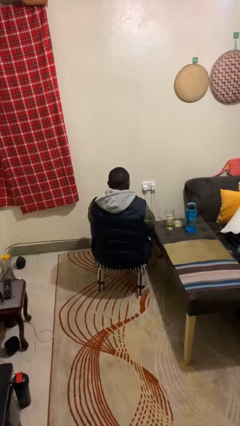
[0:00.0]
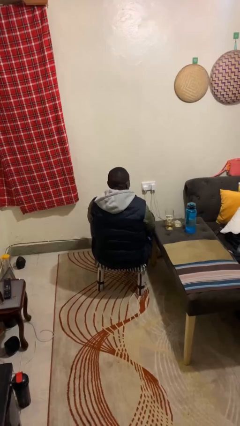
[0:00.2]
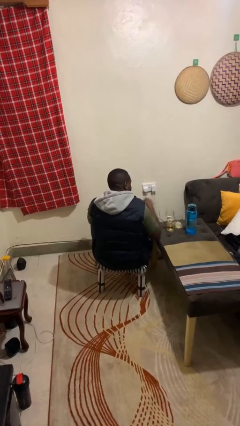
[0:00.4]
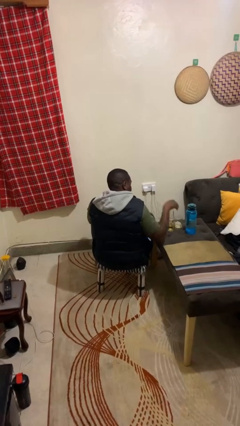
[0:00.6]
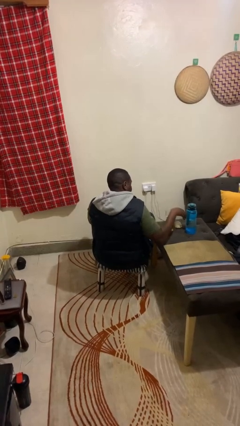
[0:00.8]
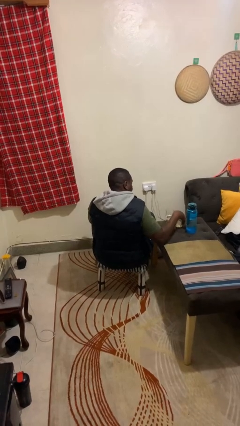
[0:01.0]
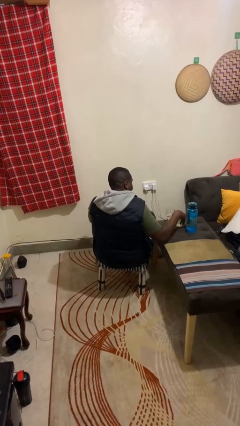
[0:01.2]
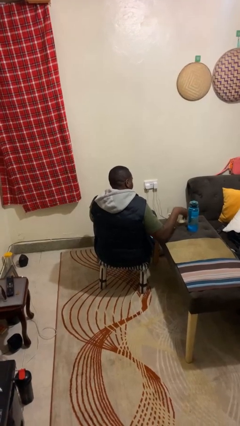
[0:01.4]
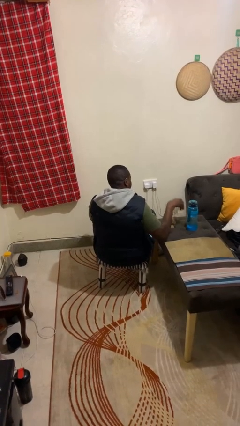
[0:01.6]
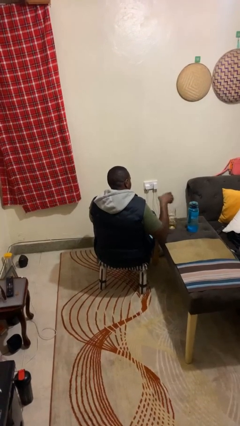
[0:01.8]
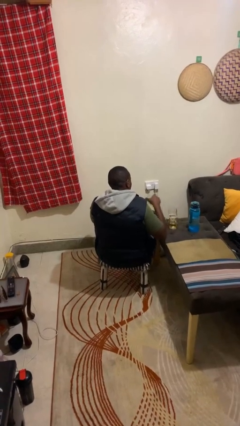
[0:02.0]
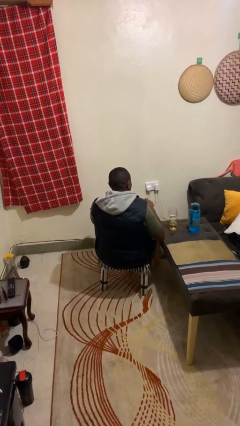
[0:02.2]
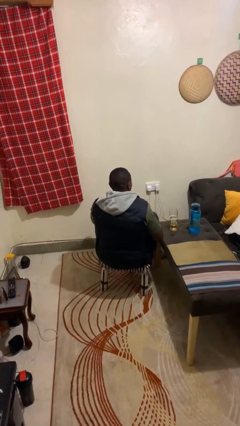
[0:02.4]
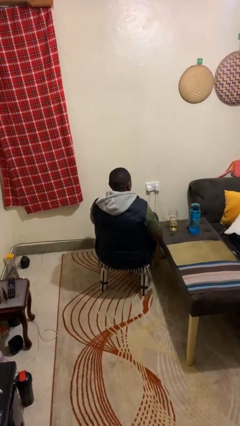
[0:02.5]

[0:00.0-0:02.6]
person picks up object from table

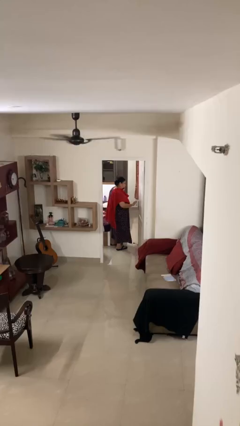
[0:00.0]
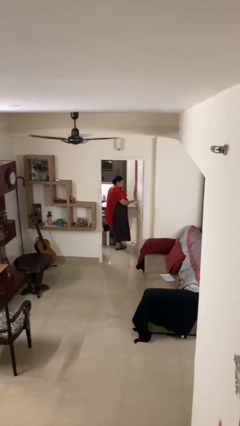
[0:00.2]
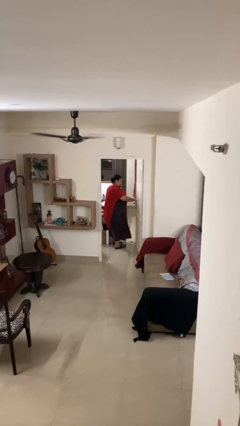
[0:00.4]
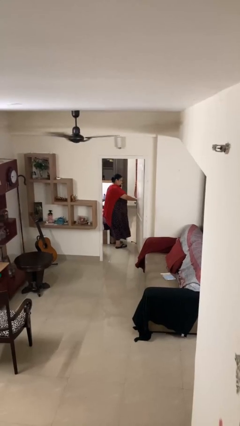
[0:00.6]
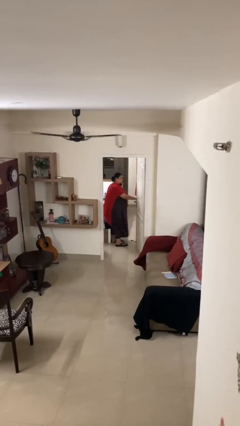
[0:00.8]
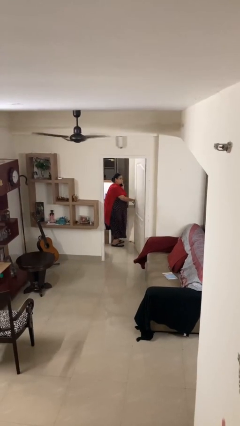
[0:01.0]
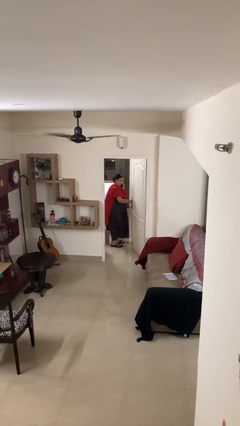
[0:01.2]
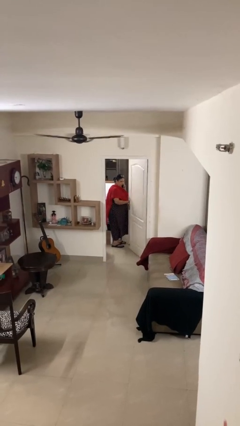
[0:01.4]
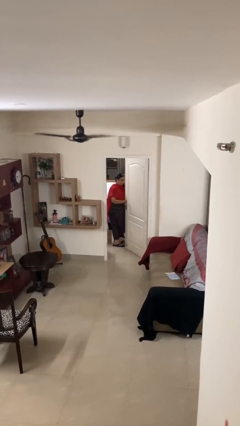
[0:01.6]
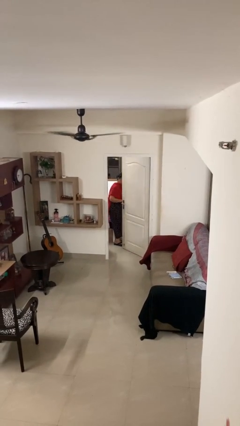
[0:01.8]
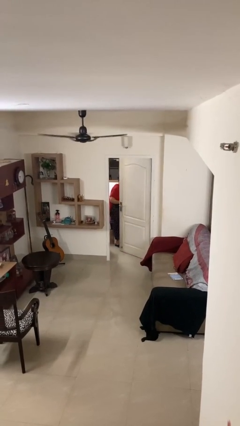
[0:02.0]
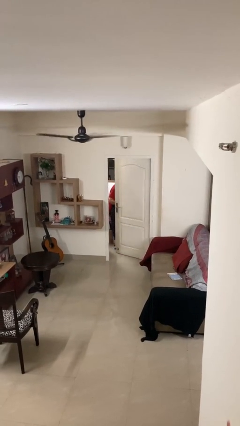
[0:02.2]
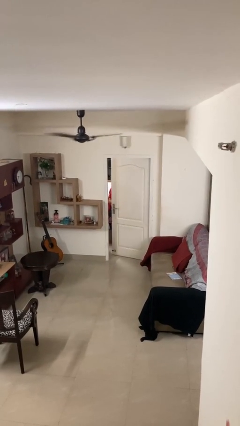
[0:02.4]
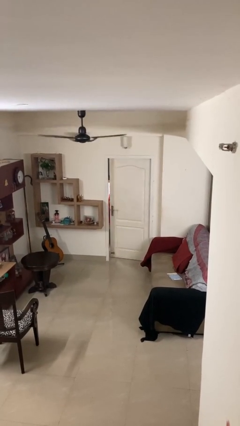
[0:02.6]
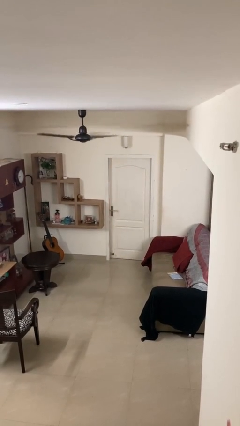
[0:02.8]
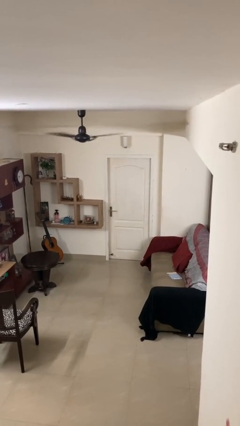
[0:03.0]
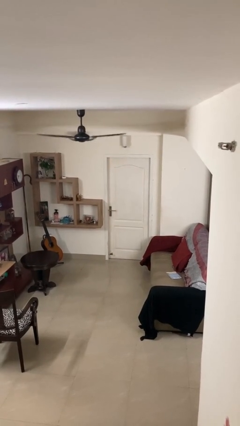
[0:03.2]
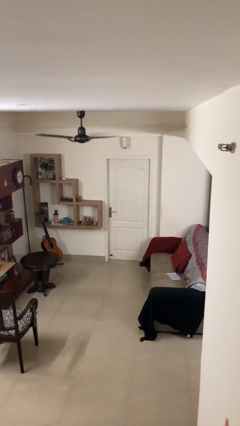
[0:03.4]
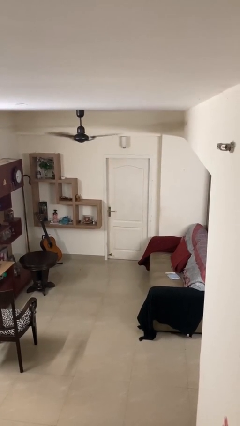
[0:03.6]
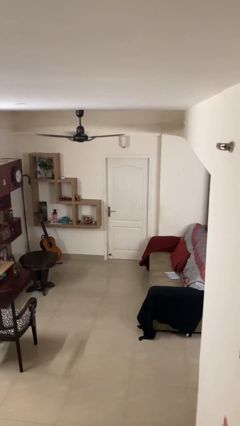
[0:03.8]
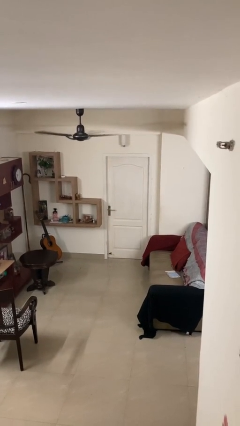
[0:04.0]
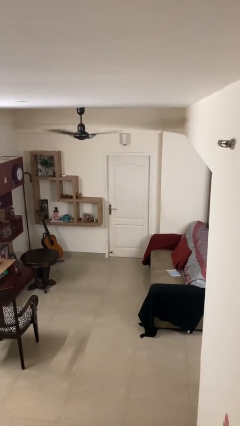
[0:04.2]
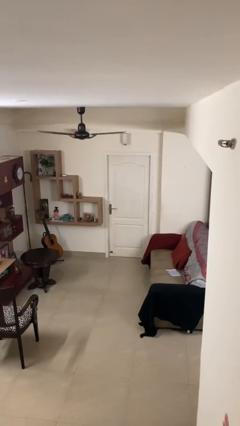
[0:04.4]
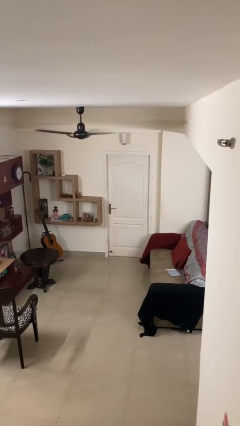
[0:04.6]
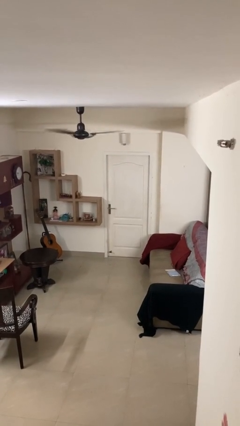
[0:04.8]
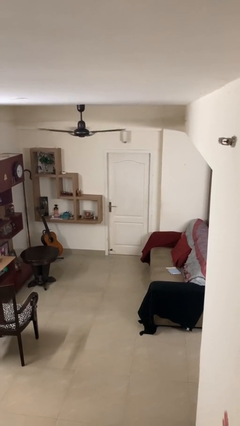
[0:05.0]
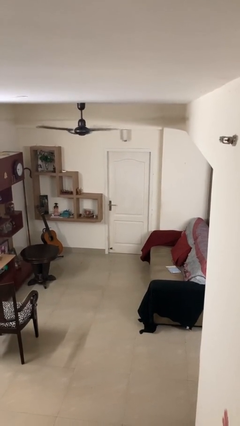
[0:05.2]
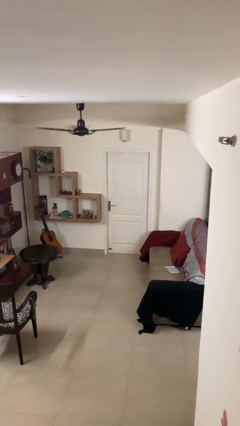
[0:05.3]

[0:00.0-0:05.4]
person closes facility door

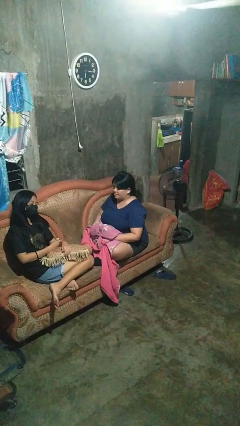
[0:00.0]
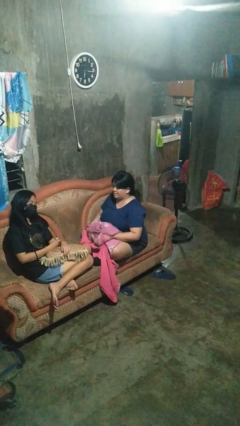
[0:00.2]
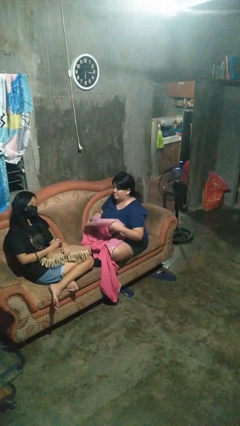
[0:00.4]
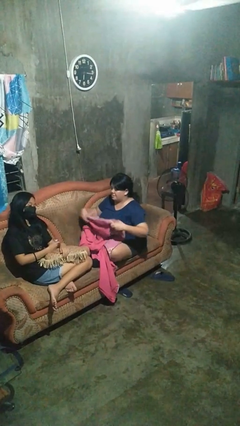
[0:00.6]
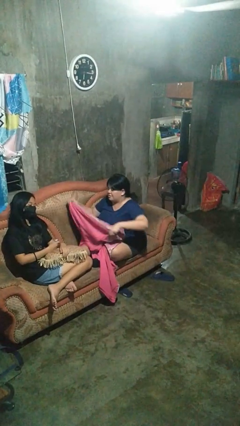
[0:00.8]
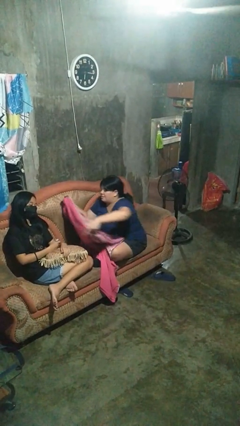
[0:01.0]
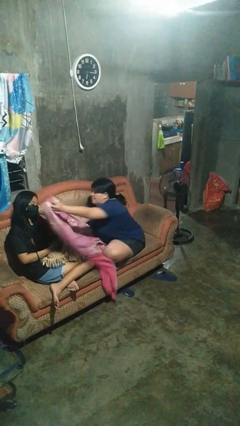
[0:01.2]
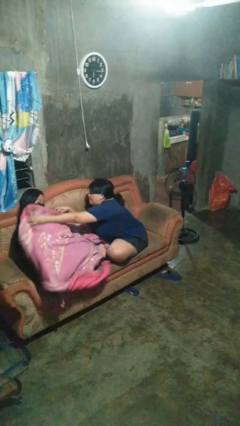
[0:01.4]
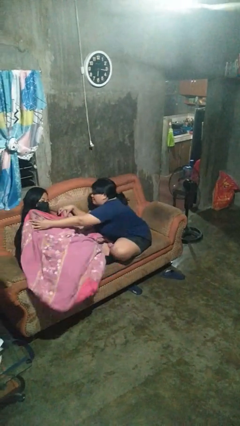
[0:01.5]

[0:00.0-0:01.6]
person covers friend with blanket

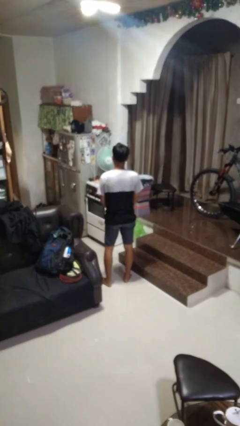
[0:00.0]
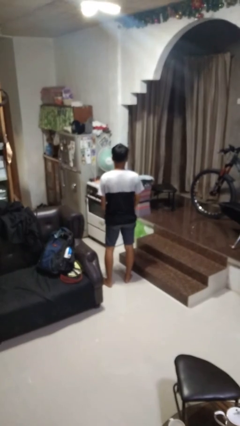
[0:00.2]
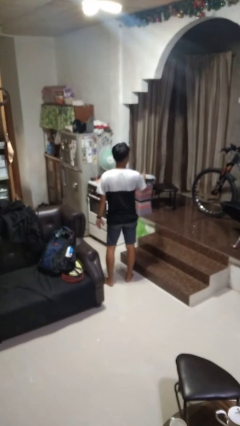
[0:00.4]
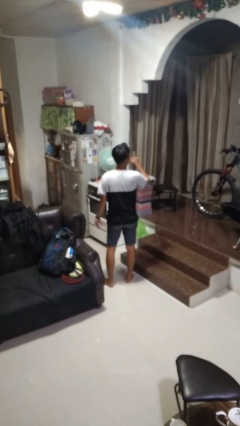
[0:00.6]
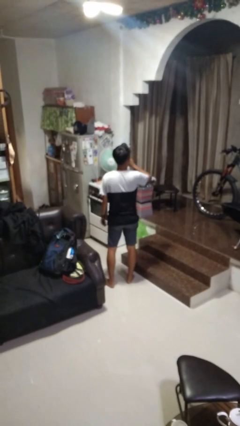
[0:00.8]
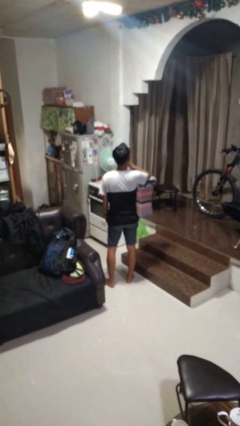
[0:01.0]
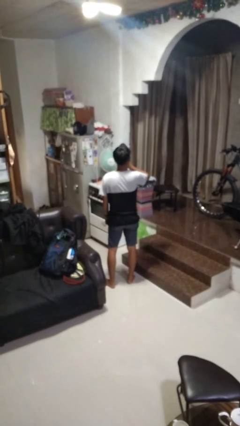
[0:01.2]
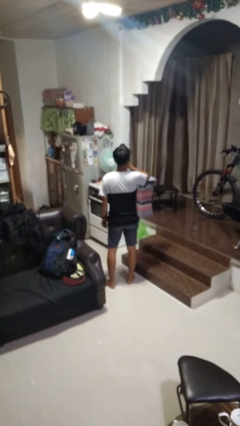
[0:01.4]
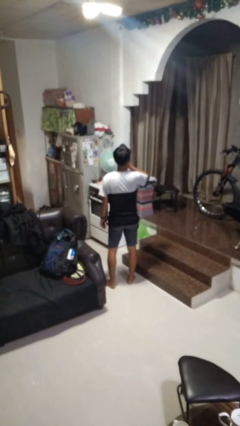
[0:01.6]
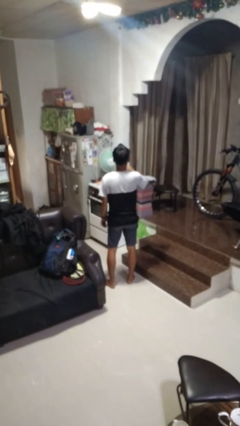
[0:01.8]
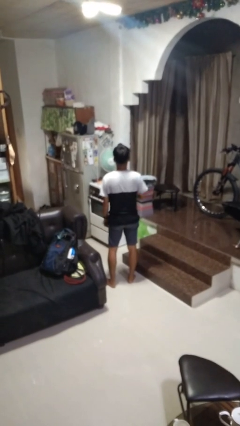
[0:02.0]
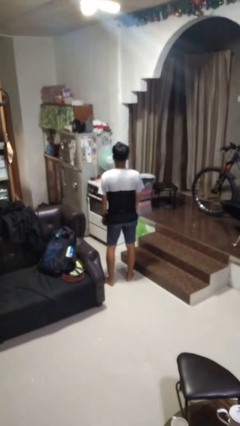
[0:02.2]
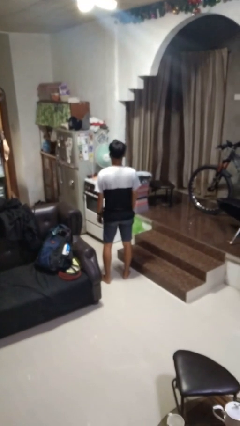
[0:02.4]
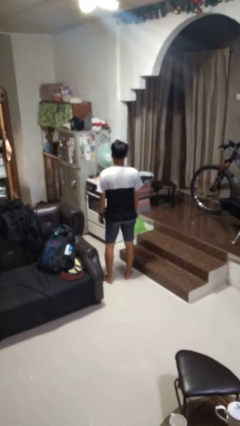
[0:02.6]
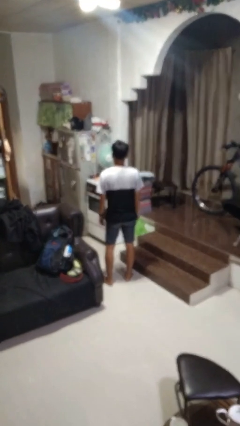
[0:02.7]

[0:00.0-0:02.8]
person gestures be quiet

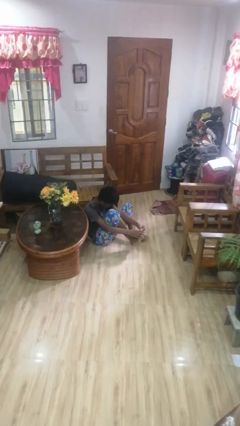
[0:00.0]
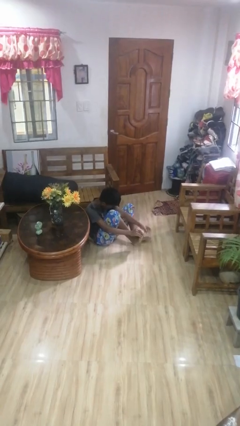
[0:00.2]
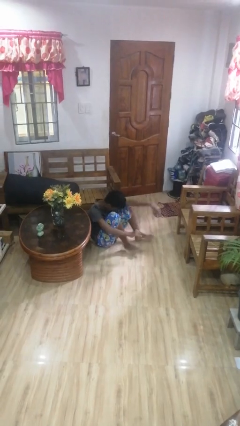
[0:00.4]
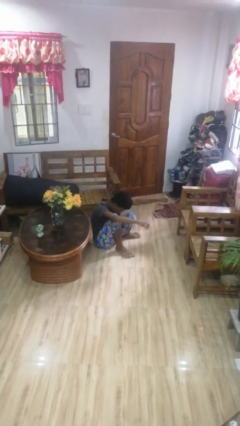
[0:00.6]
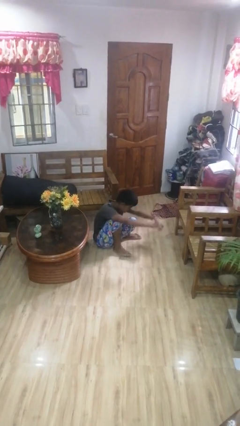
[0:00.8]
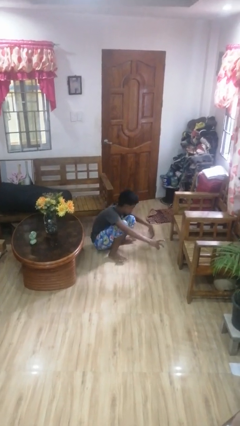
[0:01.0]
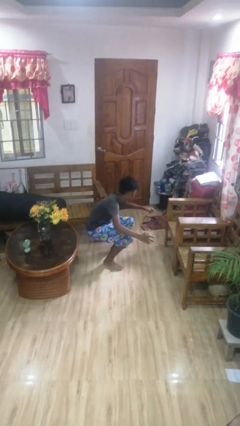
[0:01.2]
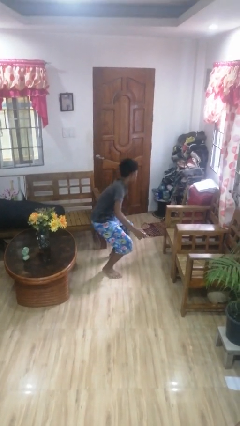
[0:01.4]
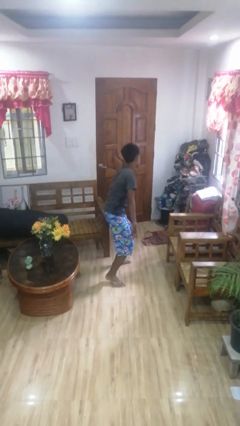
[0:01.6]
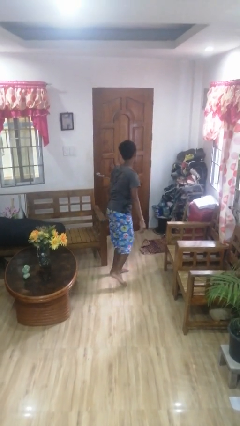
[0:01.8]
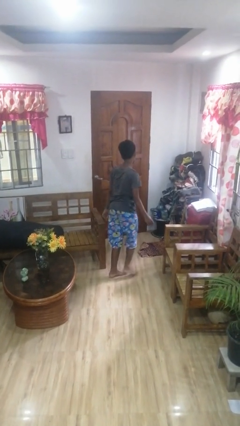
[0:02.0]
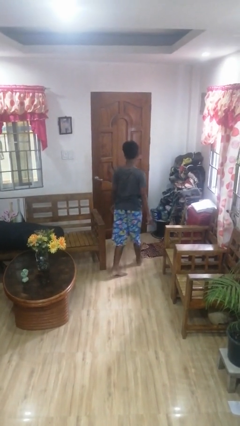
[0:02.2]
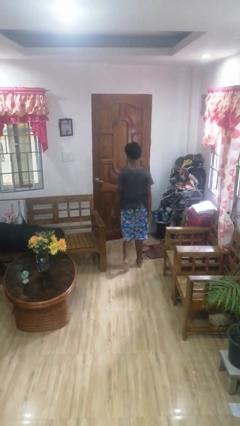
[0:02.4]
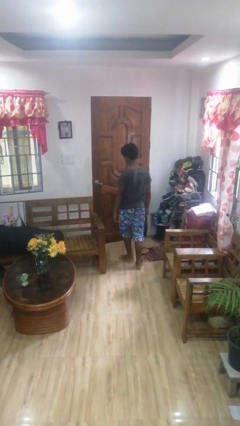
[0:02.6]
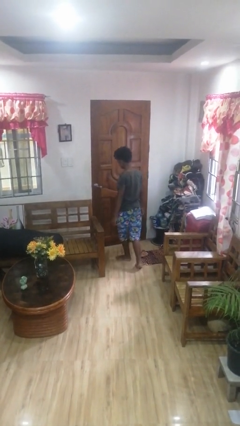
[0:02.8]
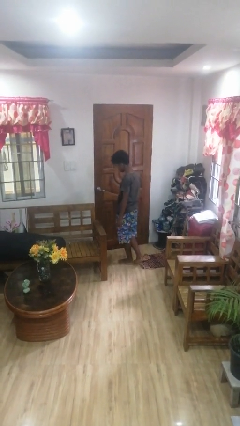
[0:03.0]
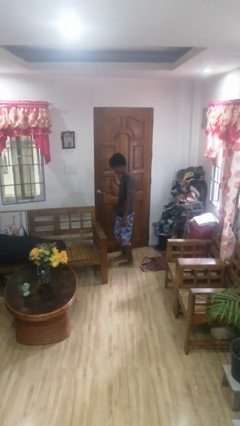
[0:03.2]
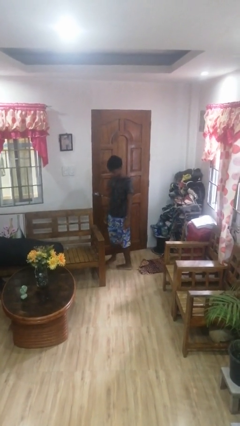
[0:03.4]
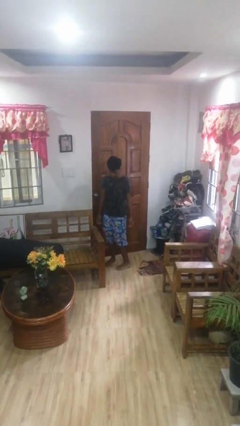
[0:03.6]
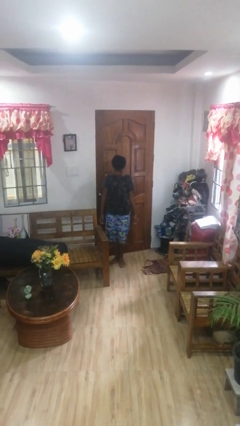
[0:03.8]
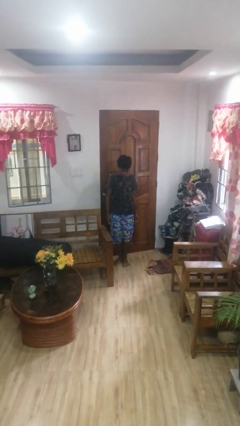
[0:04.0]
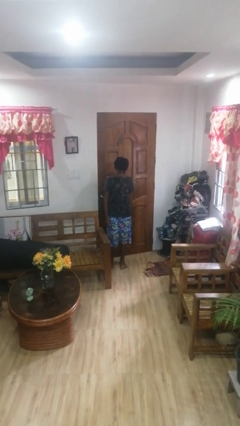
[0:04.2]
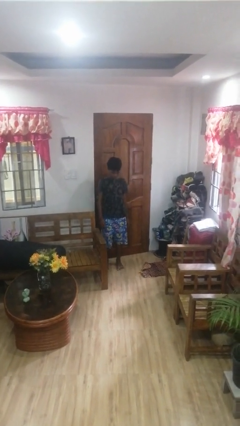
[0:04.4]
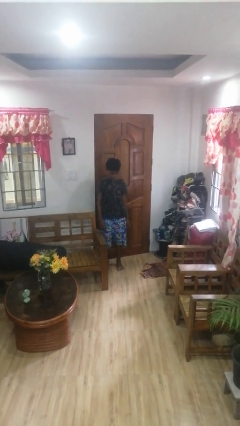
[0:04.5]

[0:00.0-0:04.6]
person stands up from floor

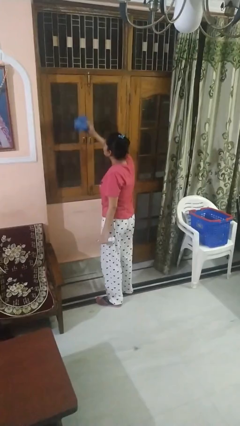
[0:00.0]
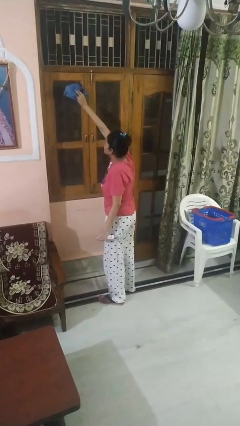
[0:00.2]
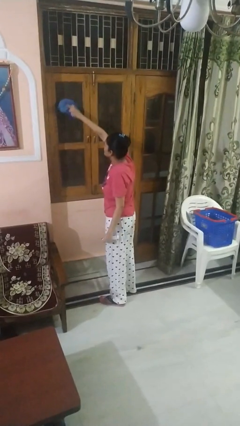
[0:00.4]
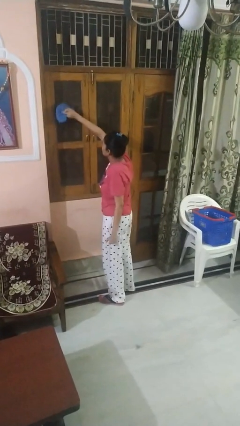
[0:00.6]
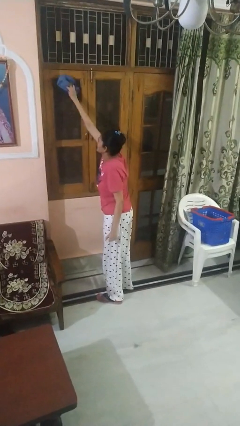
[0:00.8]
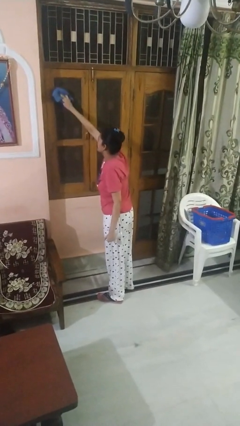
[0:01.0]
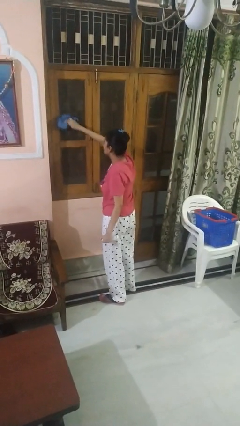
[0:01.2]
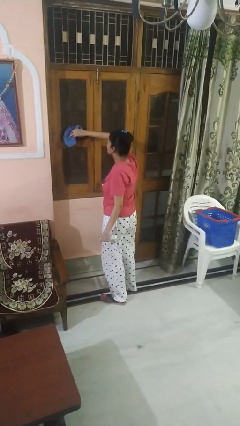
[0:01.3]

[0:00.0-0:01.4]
person washes window
